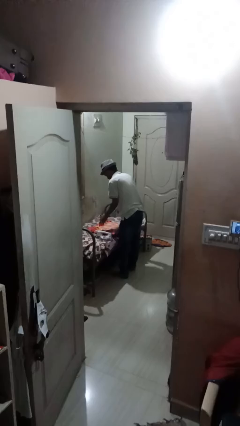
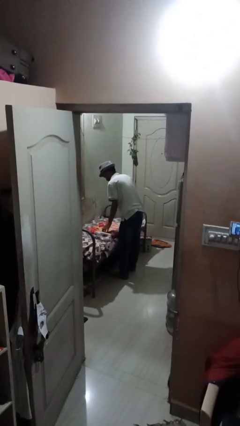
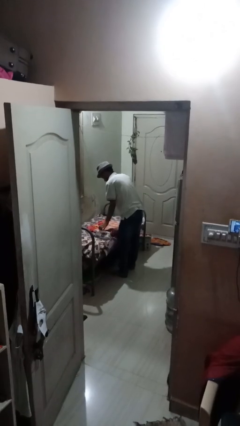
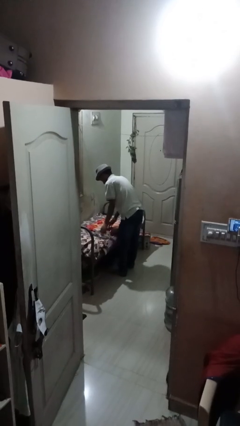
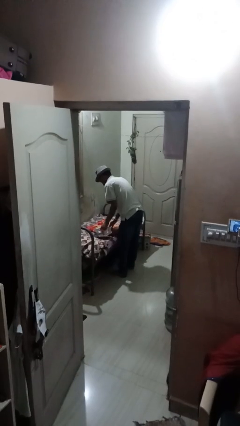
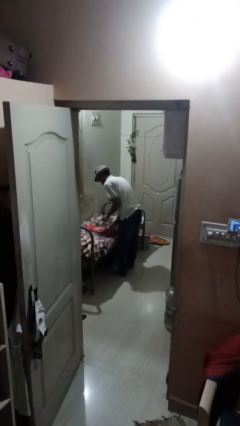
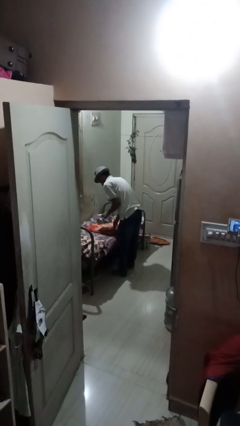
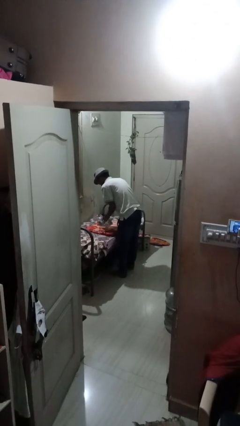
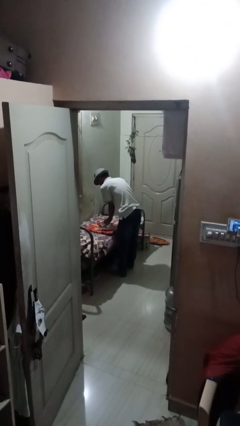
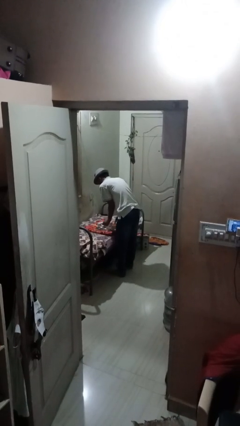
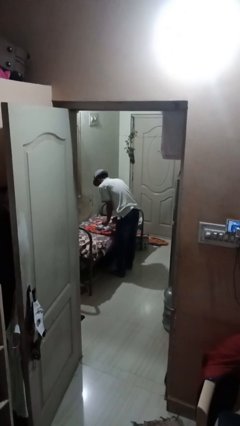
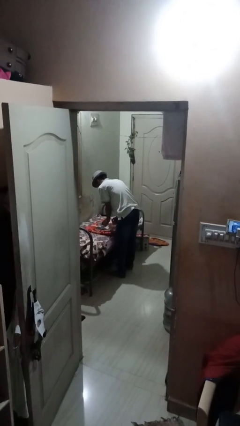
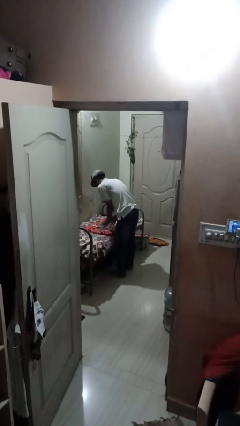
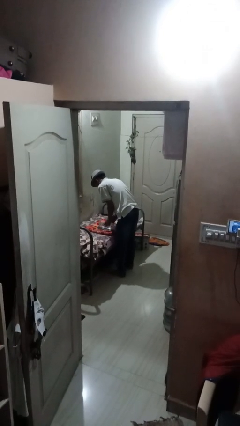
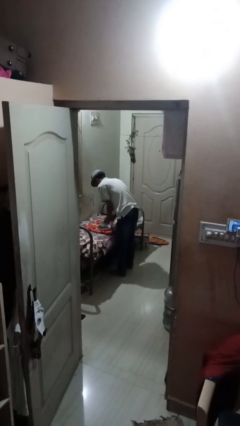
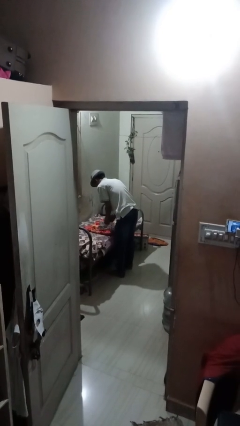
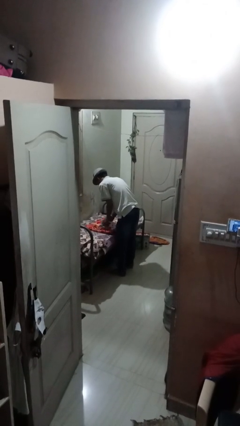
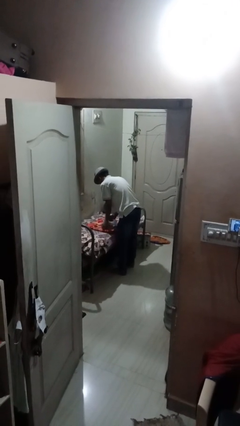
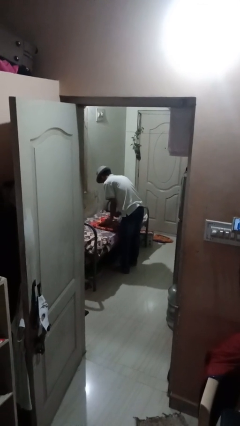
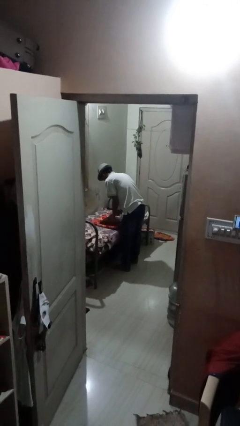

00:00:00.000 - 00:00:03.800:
person irons clothes

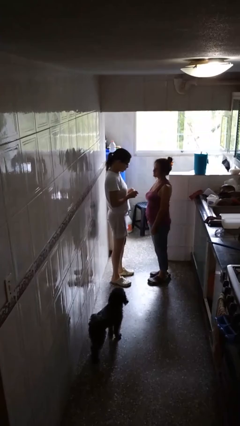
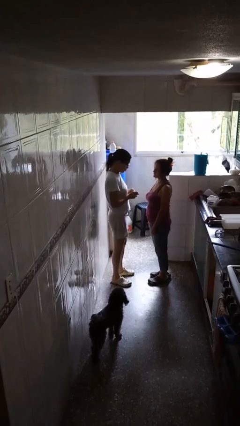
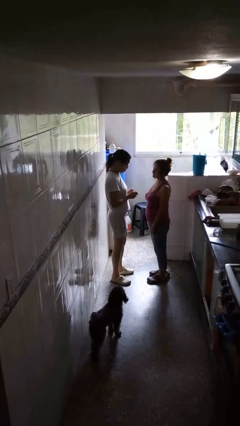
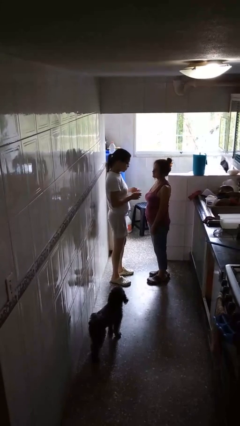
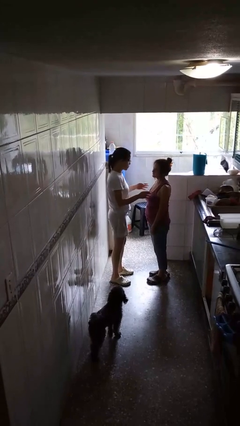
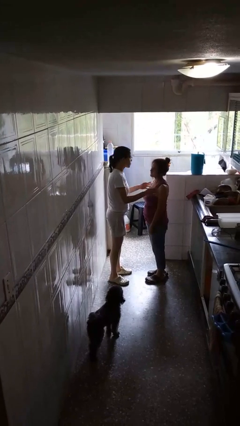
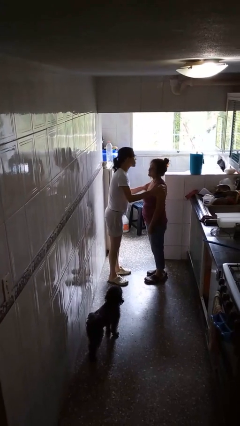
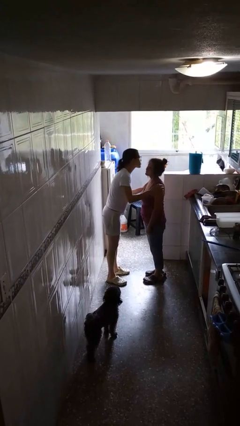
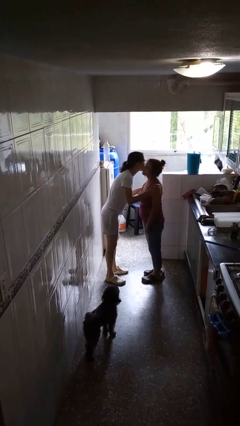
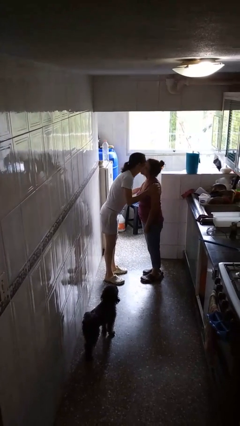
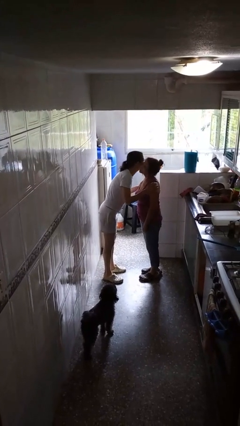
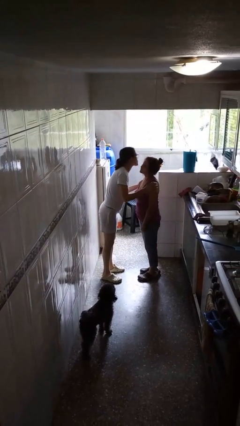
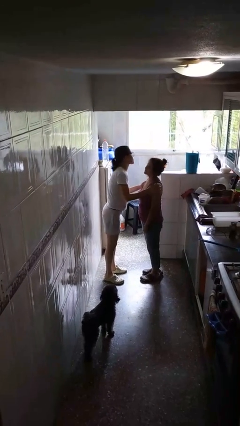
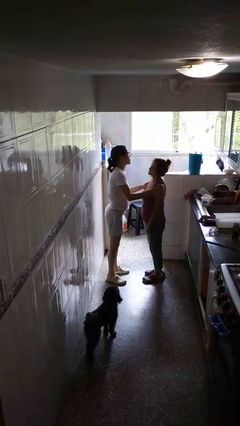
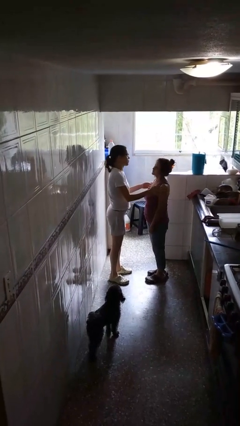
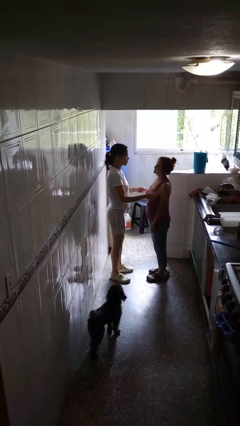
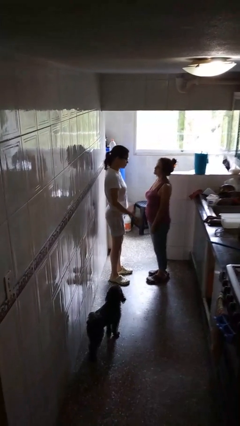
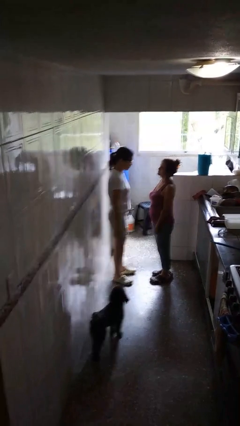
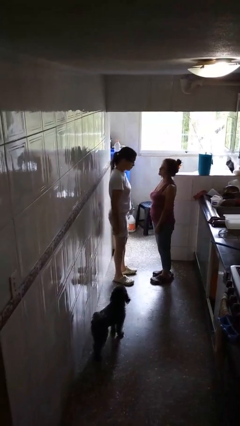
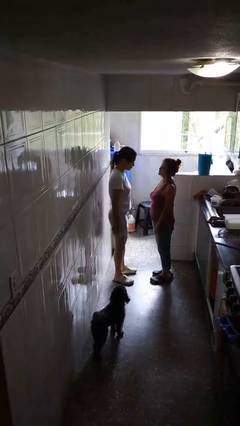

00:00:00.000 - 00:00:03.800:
person kisses cheek of person

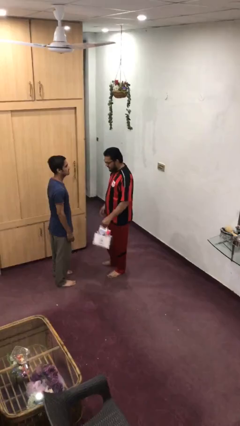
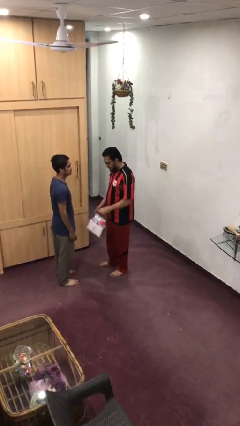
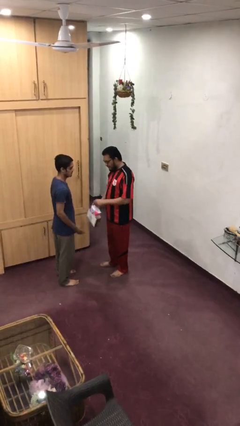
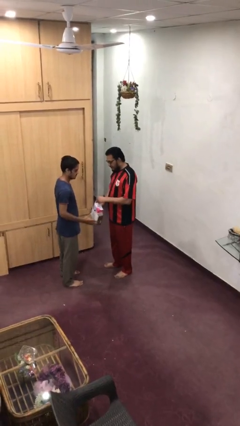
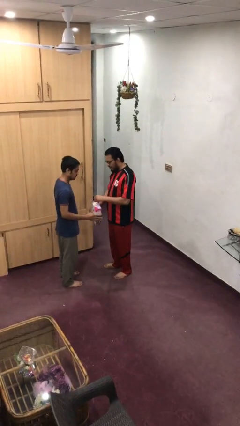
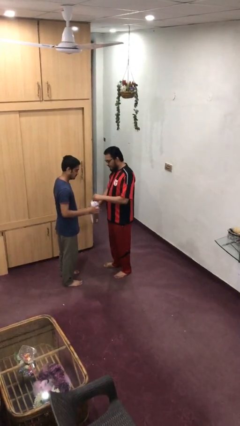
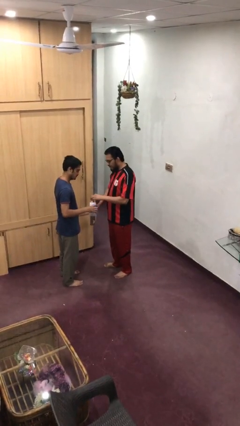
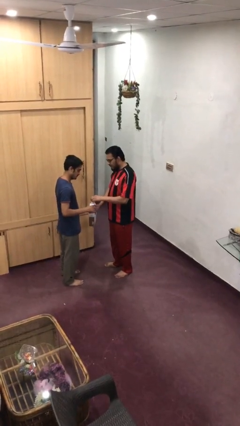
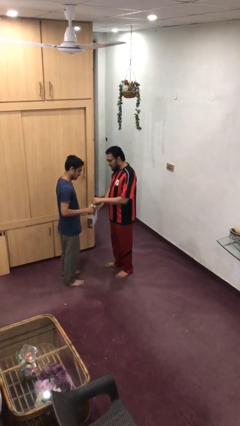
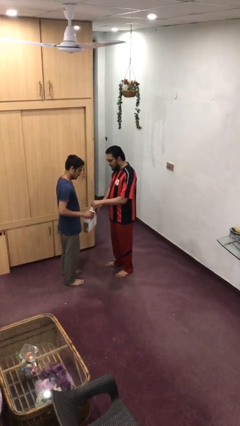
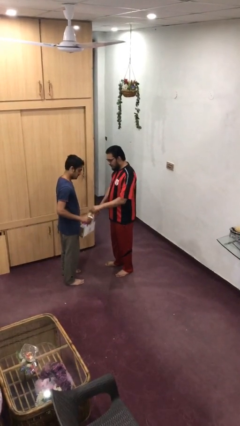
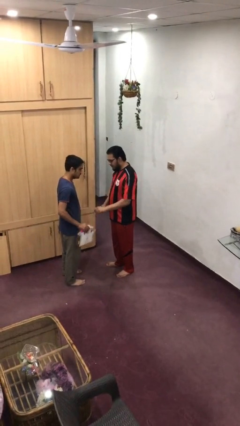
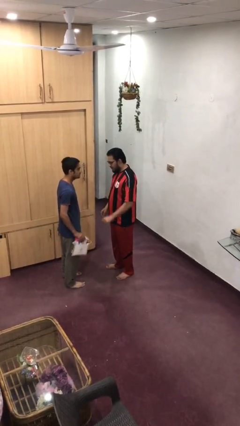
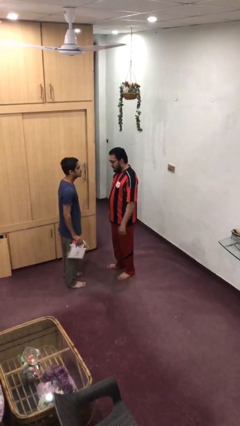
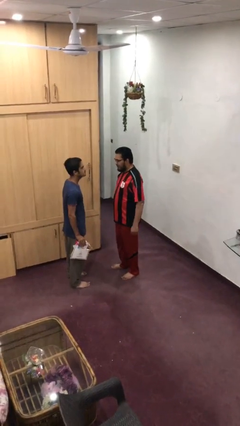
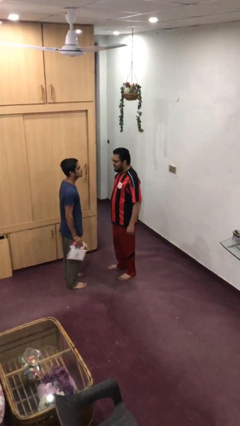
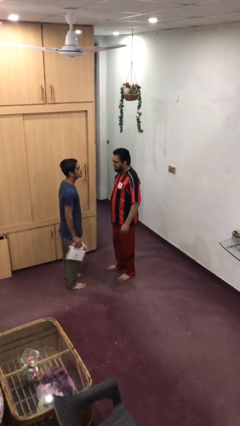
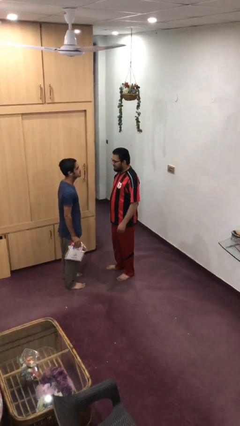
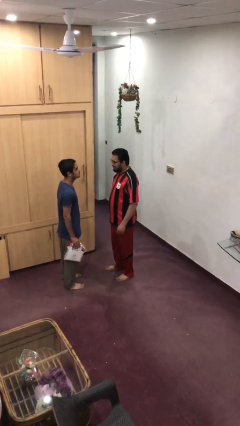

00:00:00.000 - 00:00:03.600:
person transfers object to person

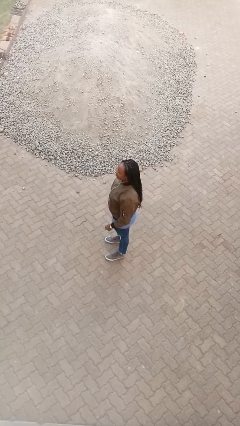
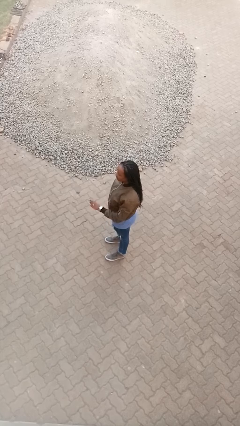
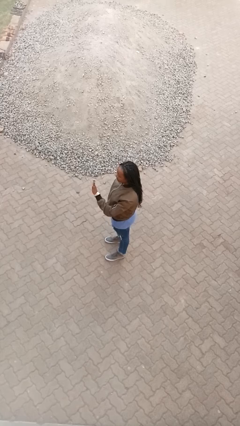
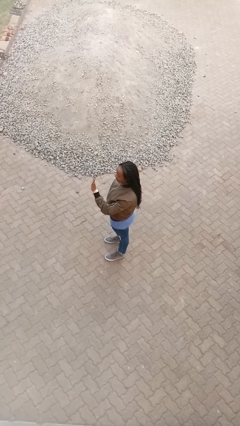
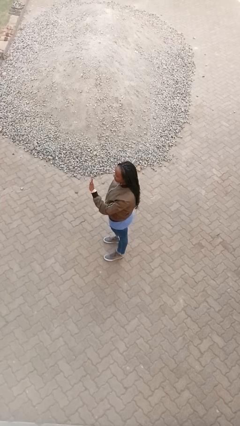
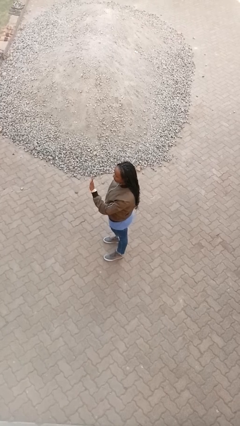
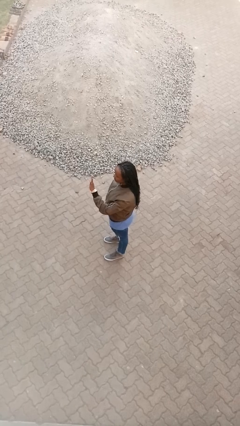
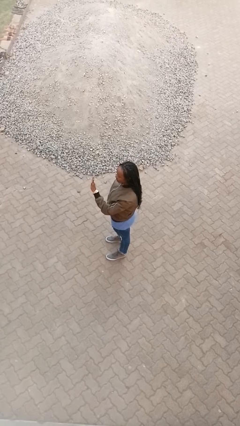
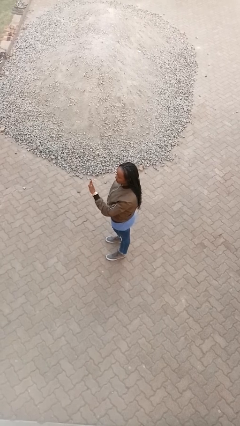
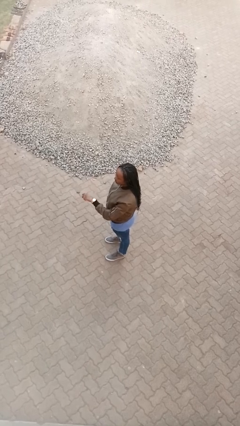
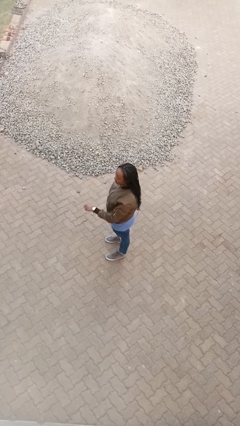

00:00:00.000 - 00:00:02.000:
person gestures stop

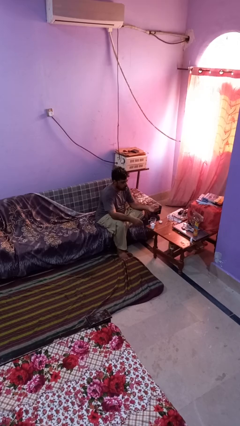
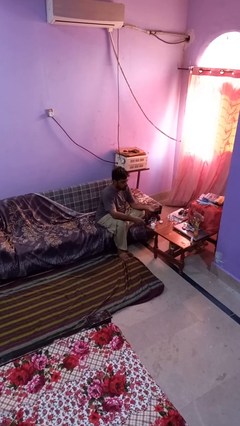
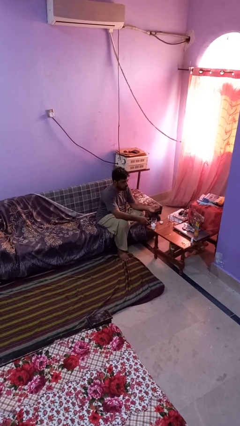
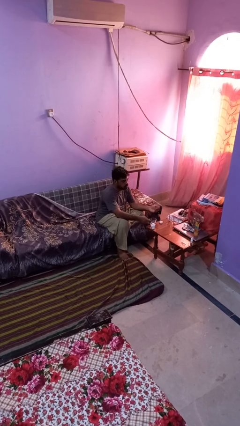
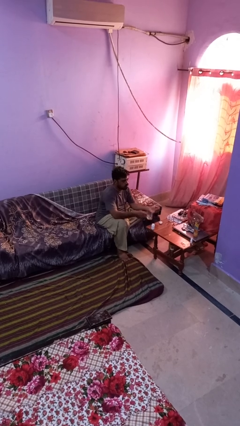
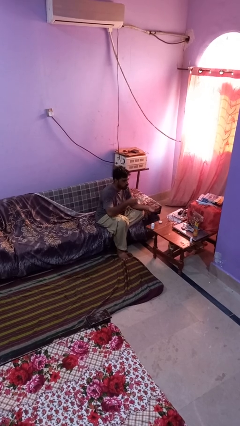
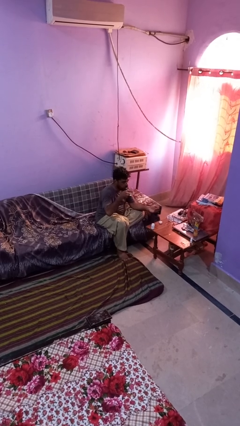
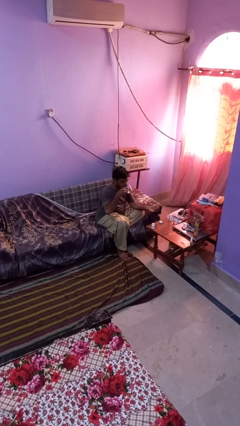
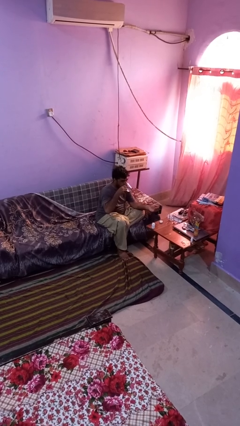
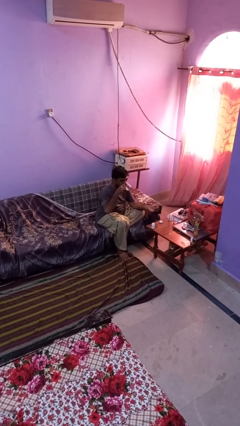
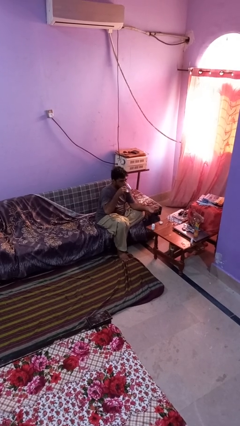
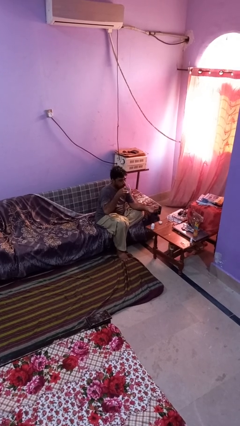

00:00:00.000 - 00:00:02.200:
person drinks from cup

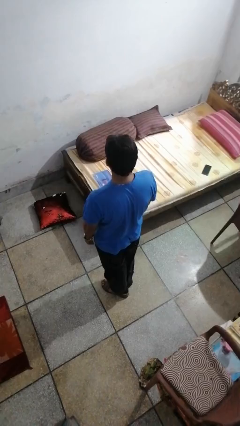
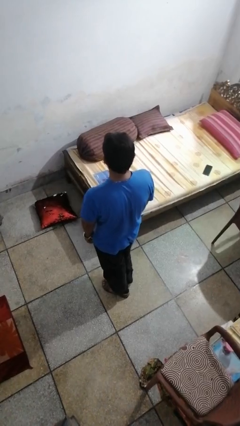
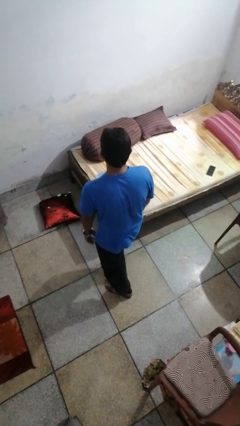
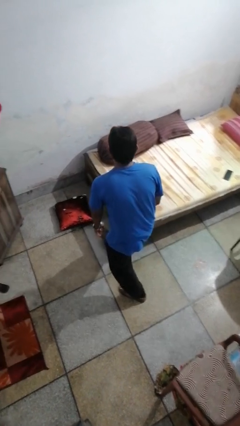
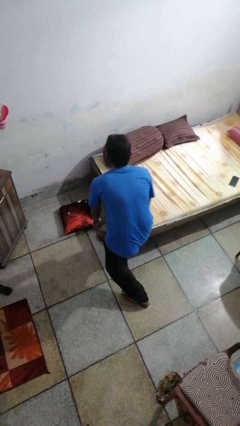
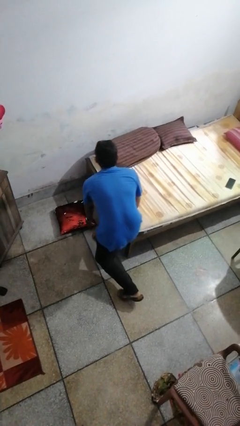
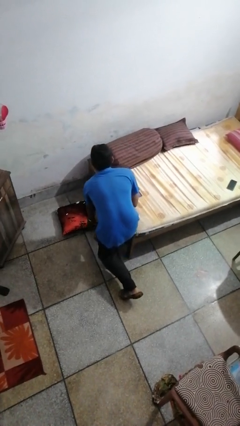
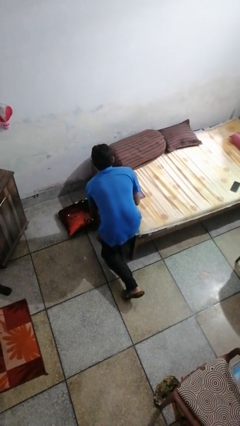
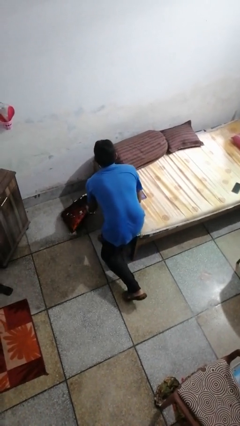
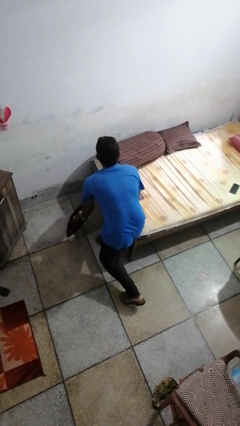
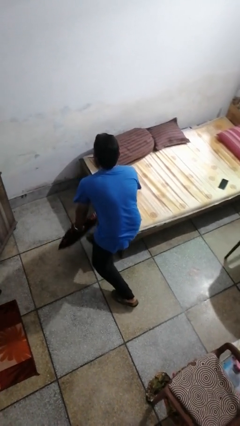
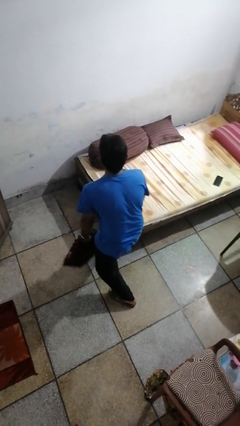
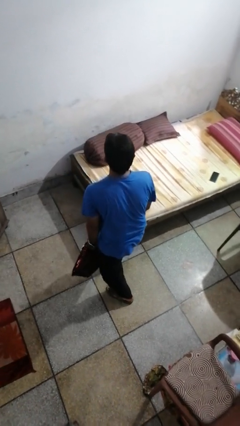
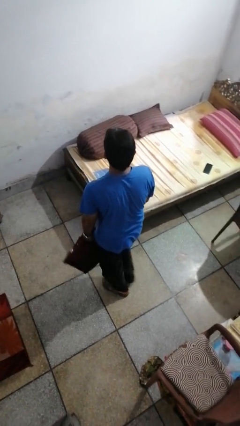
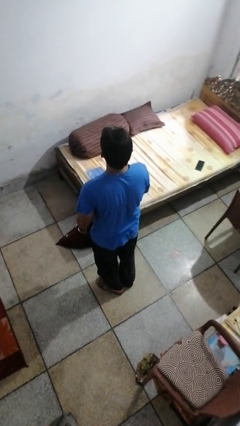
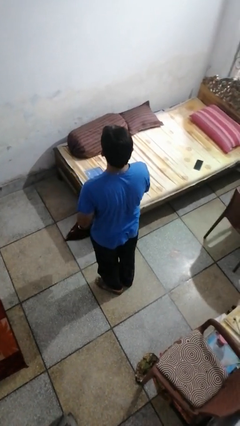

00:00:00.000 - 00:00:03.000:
person picks up object from floor
